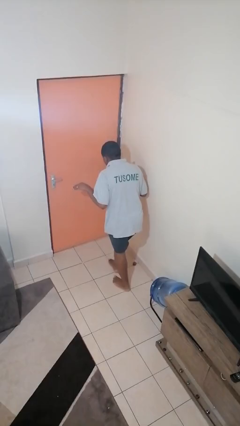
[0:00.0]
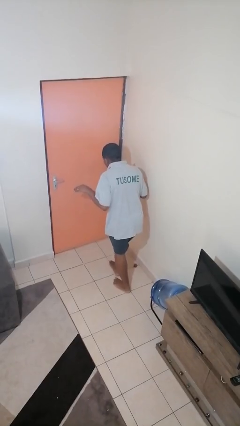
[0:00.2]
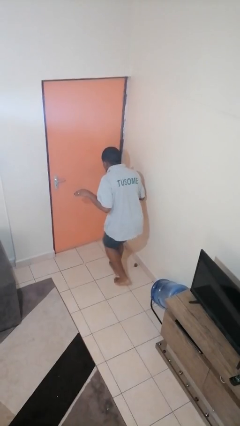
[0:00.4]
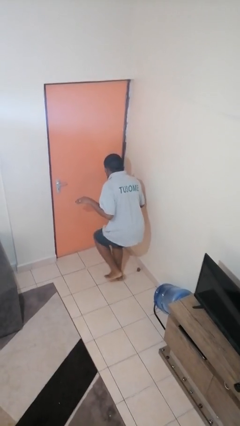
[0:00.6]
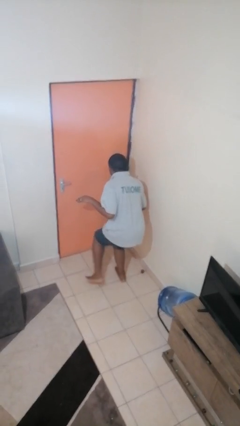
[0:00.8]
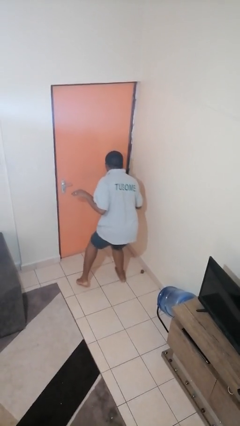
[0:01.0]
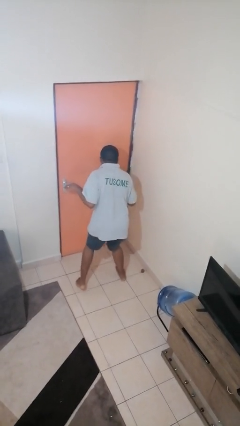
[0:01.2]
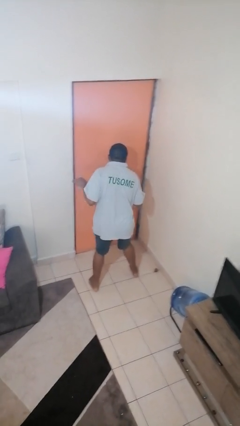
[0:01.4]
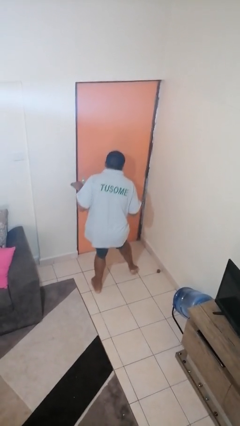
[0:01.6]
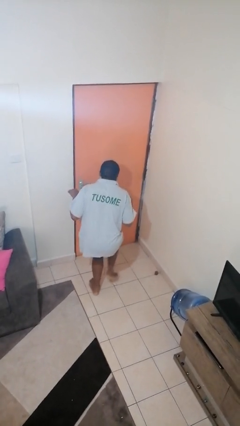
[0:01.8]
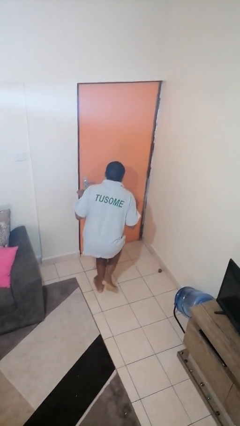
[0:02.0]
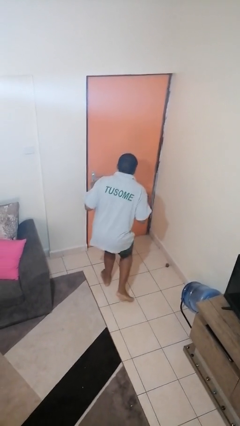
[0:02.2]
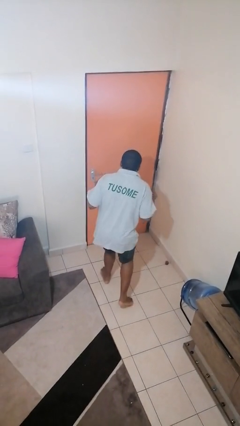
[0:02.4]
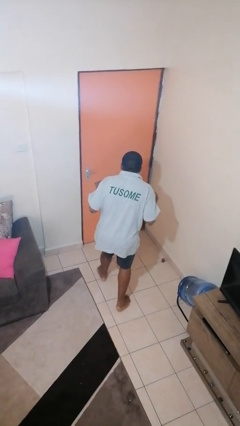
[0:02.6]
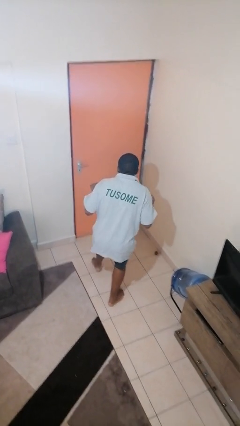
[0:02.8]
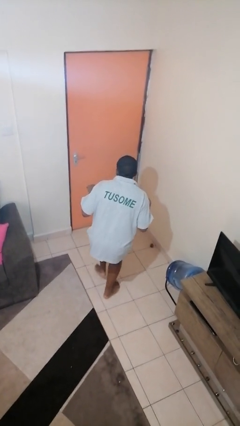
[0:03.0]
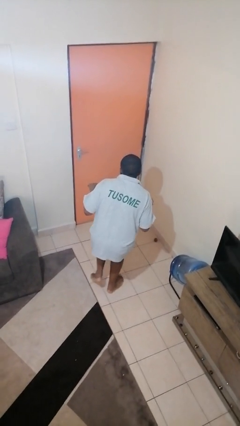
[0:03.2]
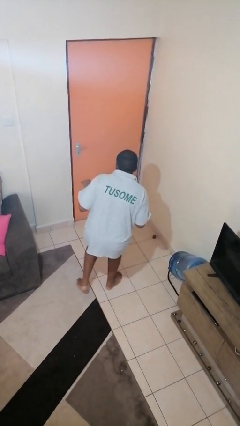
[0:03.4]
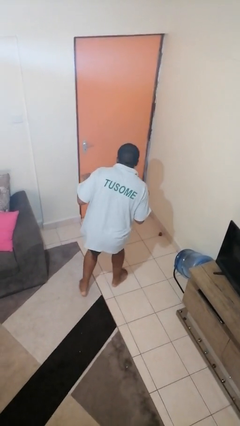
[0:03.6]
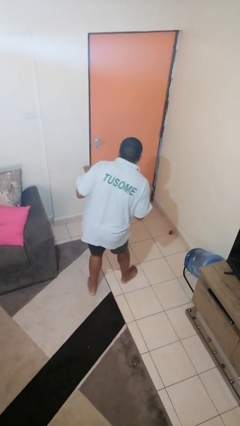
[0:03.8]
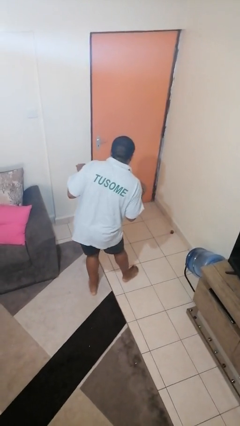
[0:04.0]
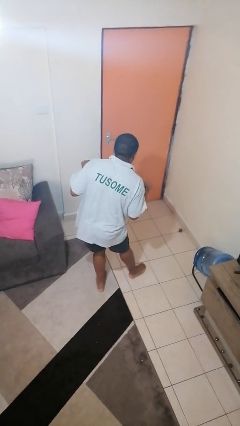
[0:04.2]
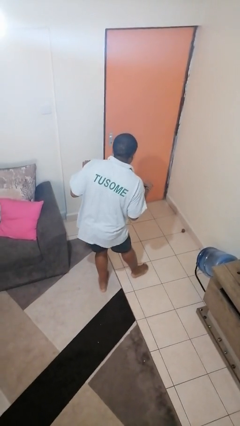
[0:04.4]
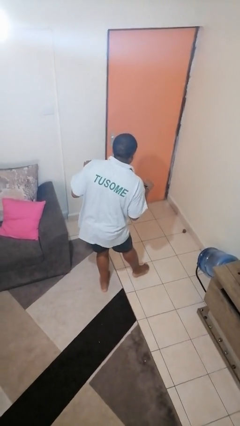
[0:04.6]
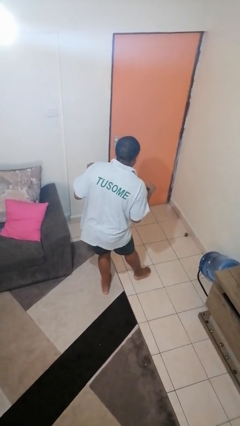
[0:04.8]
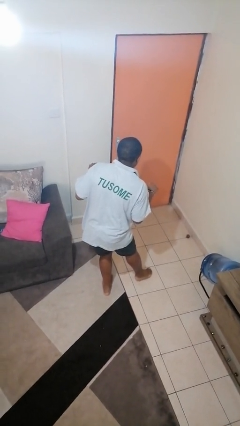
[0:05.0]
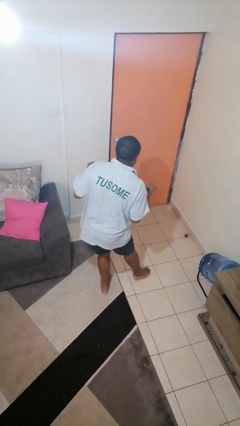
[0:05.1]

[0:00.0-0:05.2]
person walks tiptoe

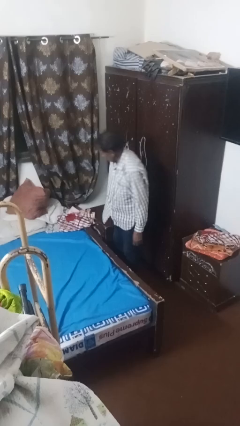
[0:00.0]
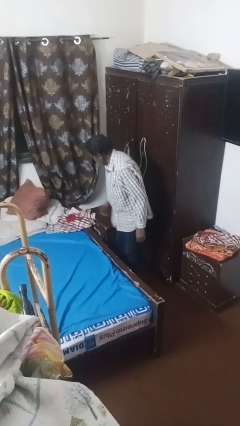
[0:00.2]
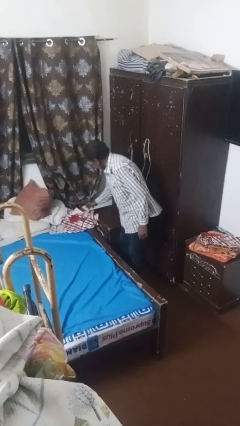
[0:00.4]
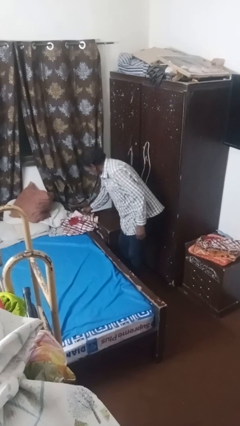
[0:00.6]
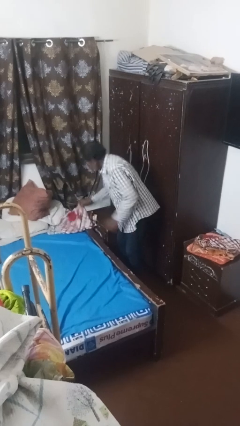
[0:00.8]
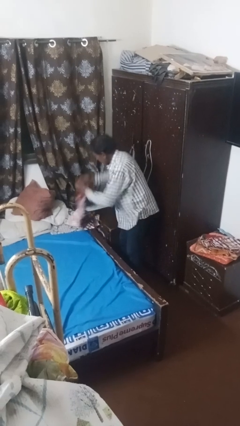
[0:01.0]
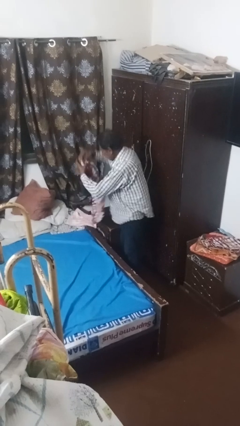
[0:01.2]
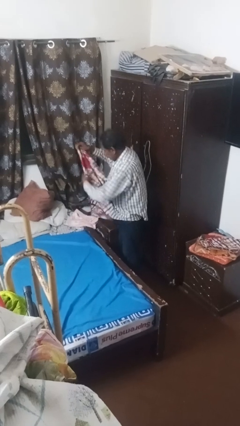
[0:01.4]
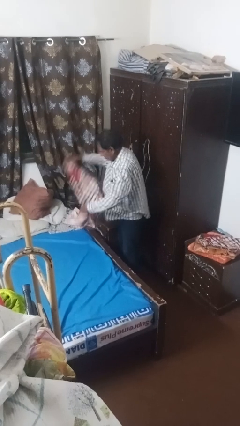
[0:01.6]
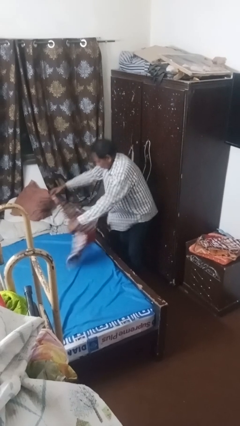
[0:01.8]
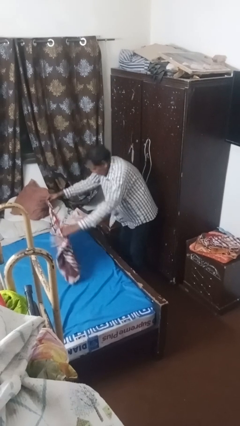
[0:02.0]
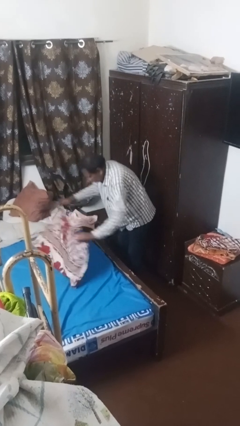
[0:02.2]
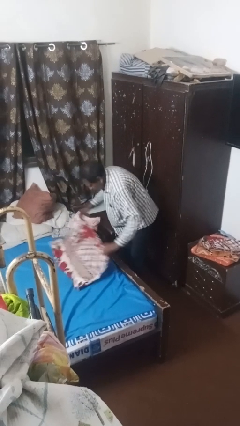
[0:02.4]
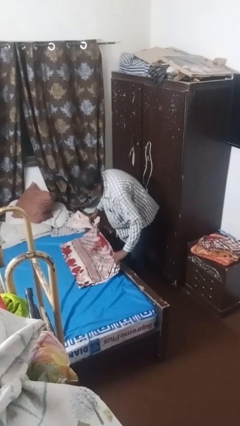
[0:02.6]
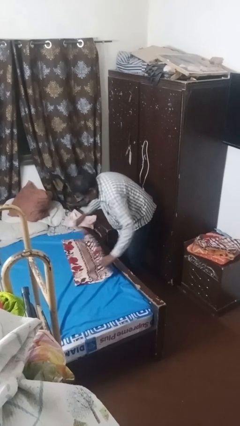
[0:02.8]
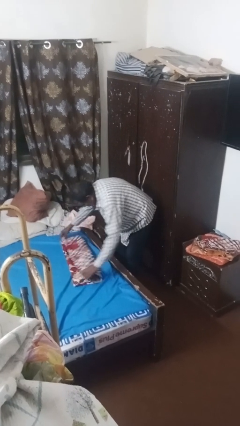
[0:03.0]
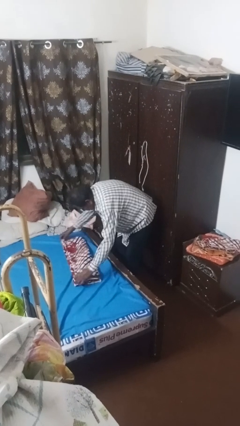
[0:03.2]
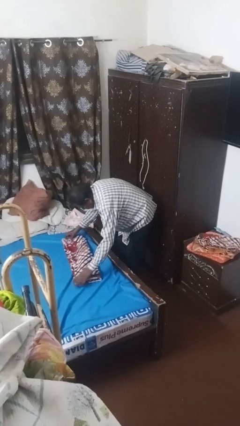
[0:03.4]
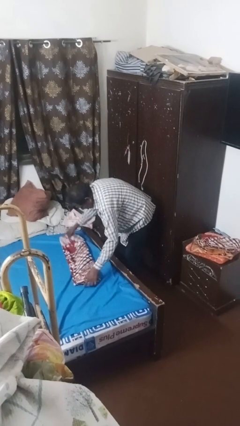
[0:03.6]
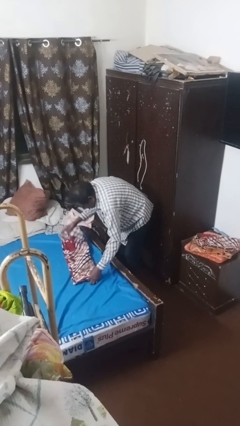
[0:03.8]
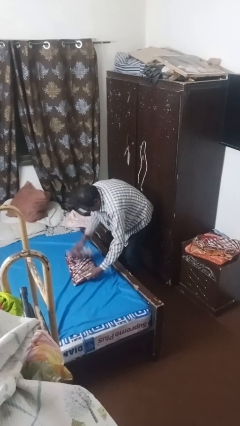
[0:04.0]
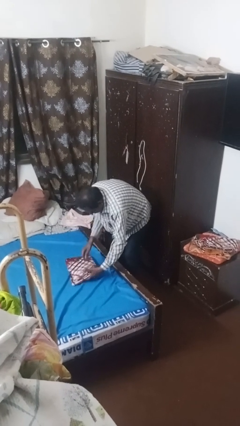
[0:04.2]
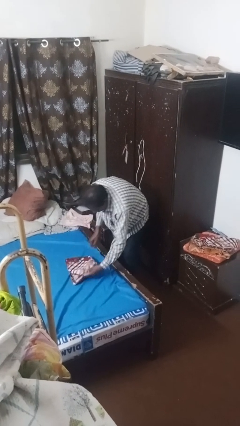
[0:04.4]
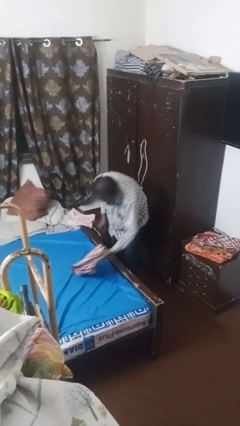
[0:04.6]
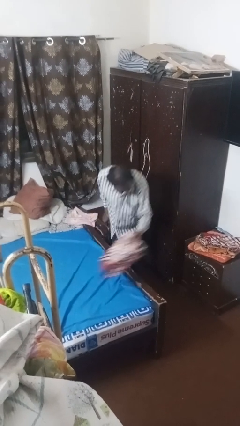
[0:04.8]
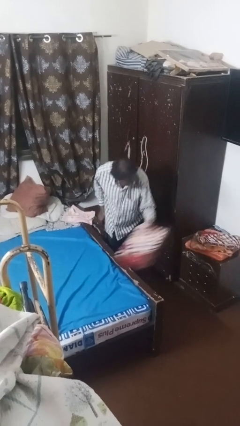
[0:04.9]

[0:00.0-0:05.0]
person folds towel

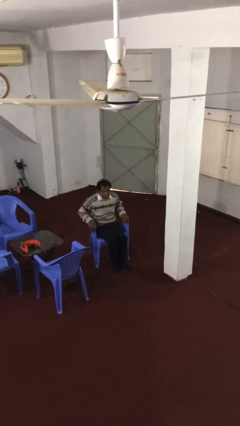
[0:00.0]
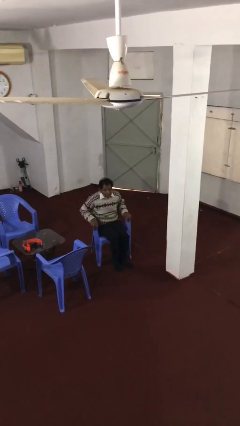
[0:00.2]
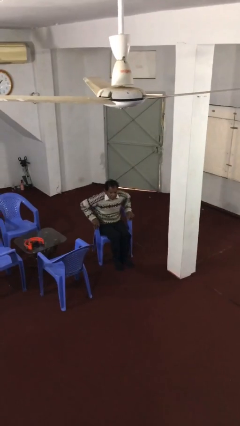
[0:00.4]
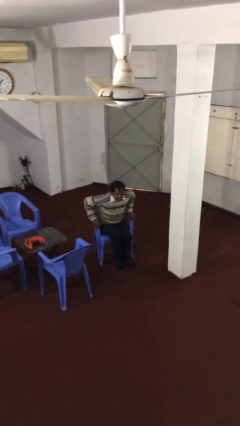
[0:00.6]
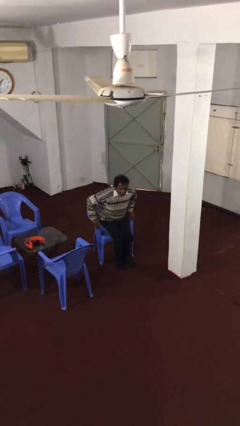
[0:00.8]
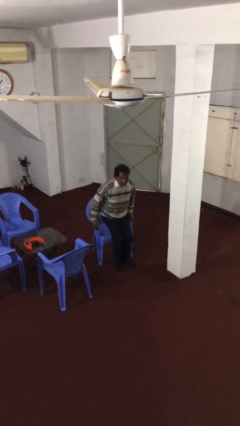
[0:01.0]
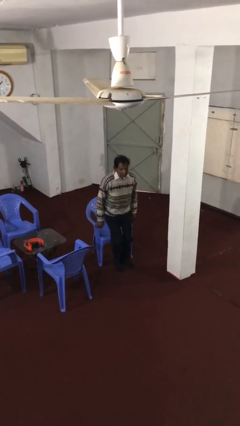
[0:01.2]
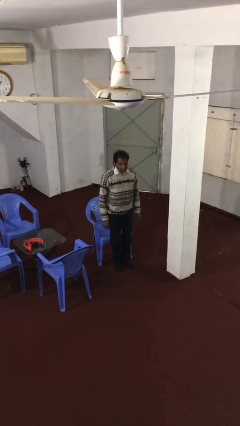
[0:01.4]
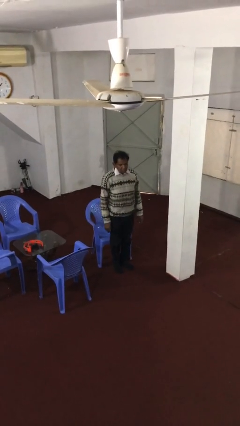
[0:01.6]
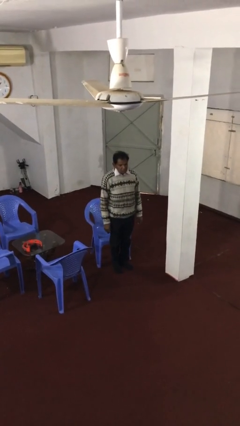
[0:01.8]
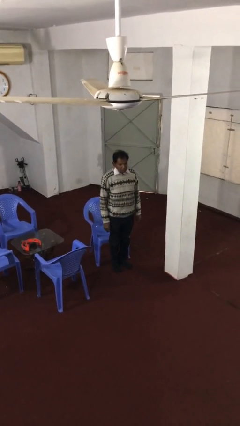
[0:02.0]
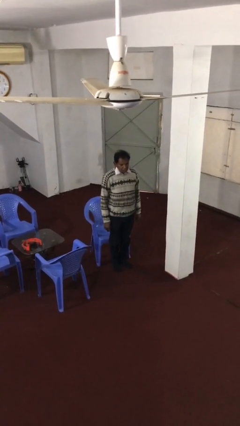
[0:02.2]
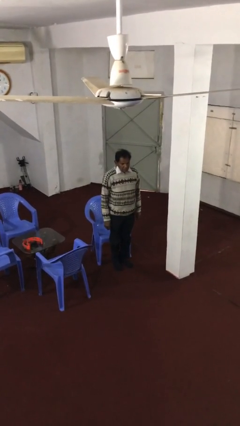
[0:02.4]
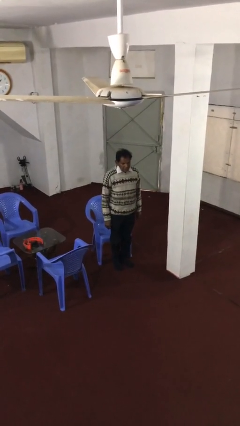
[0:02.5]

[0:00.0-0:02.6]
person stands up

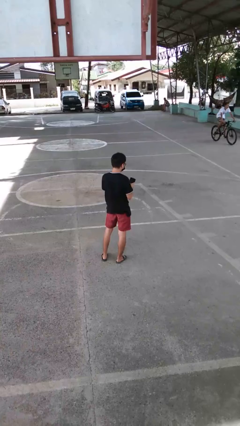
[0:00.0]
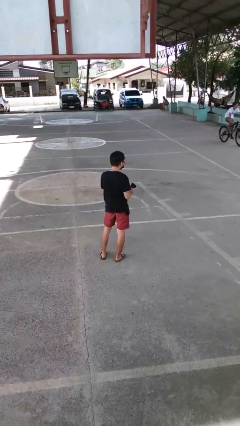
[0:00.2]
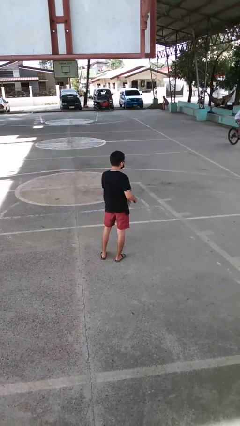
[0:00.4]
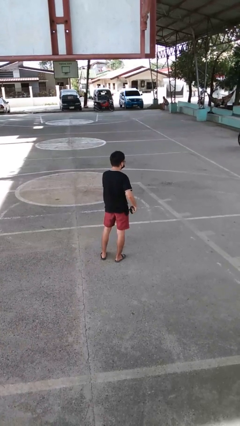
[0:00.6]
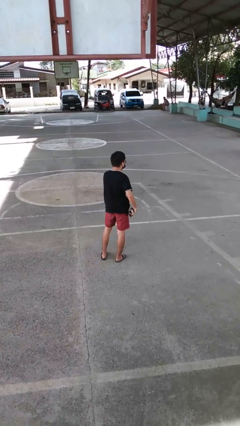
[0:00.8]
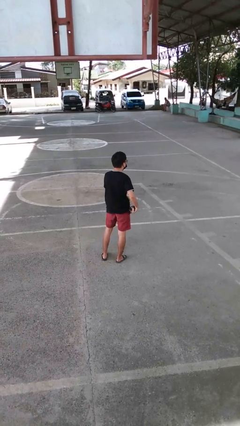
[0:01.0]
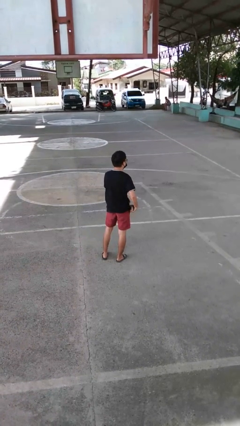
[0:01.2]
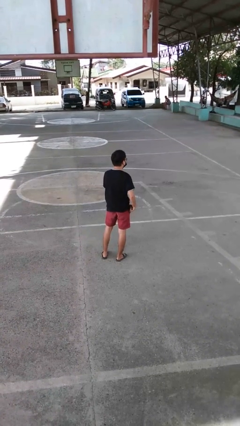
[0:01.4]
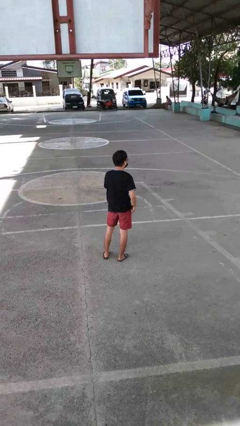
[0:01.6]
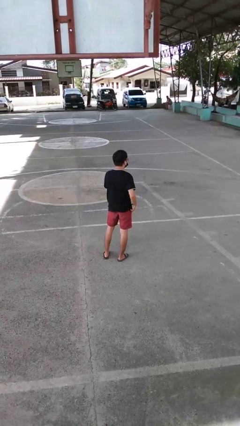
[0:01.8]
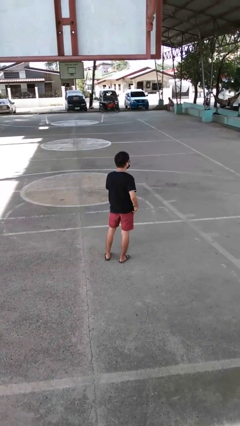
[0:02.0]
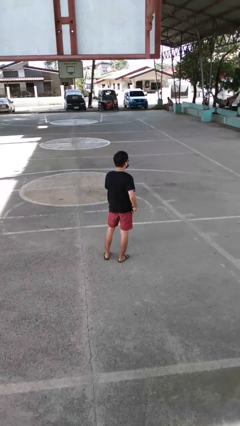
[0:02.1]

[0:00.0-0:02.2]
person puts phone into pocket

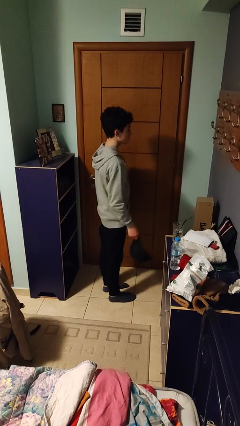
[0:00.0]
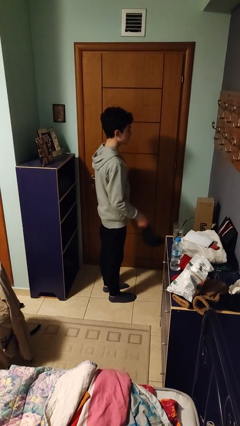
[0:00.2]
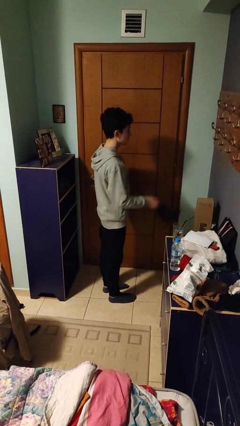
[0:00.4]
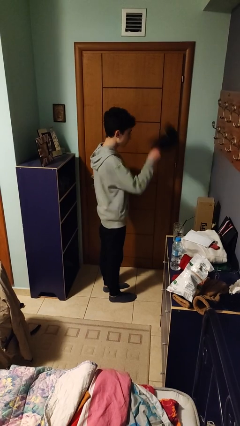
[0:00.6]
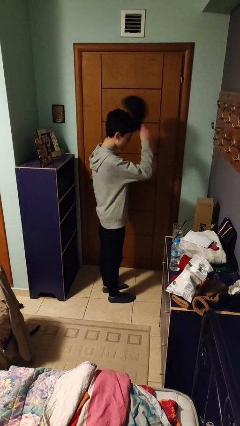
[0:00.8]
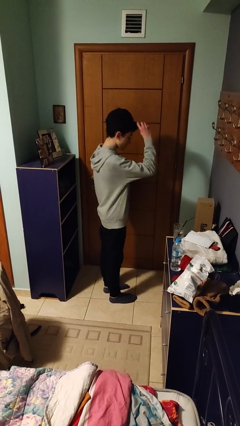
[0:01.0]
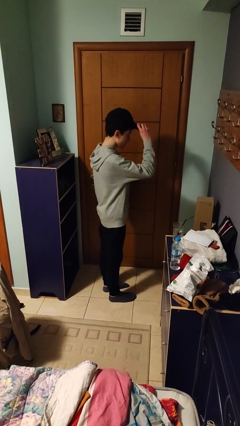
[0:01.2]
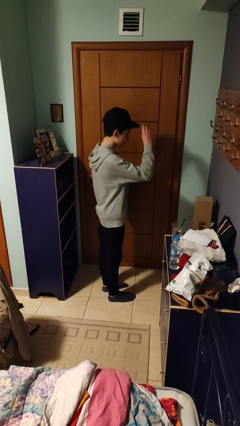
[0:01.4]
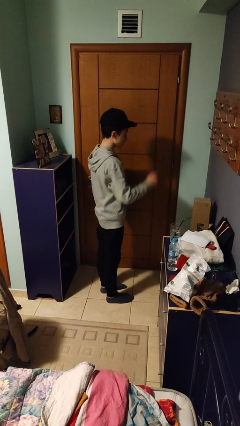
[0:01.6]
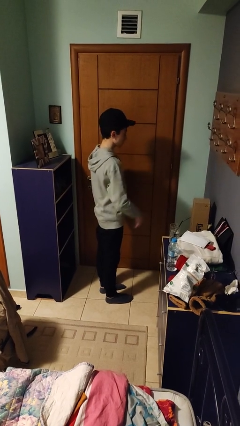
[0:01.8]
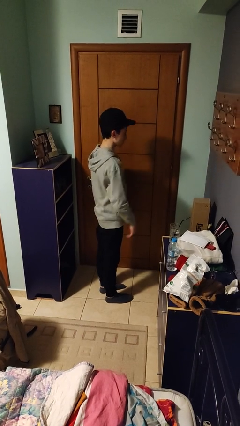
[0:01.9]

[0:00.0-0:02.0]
person puts on hat
